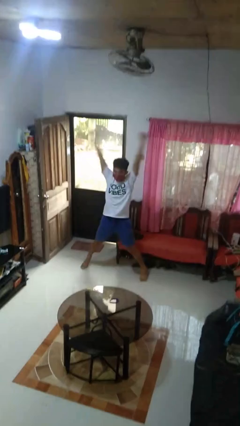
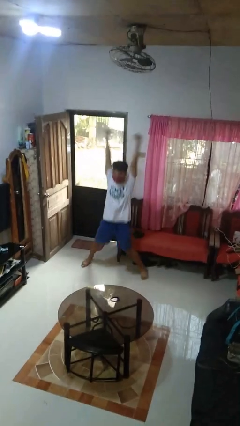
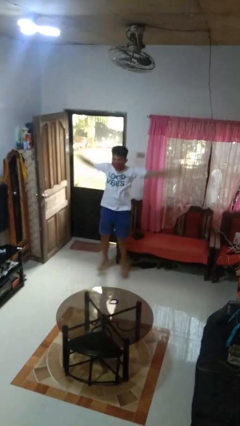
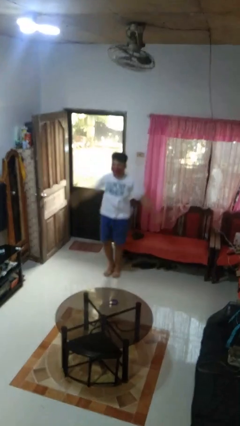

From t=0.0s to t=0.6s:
person exercises with jumping jacks

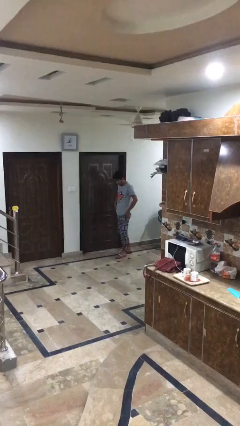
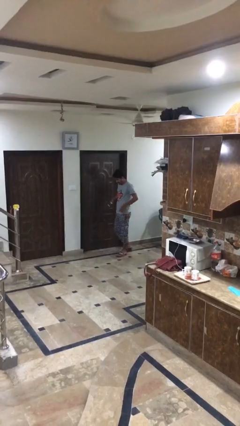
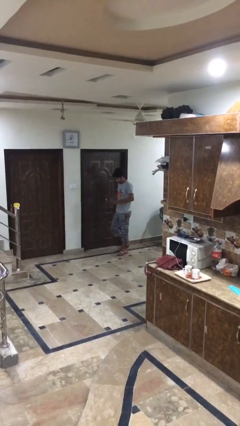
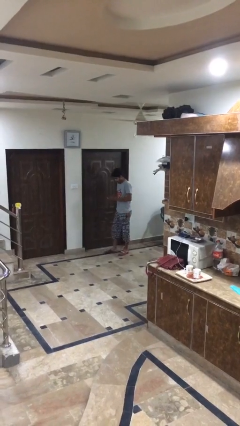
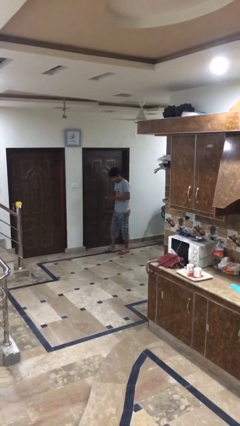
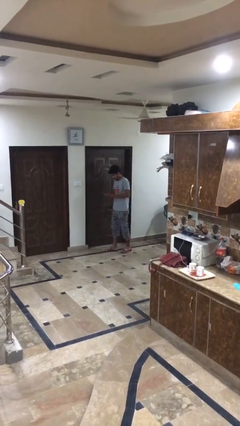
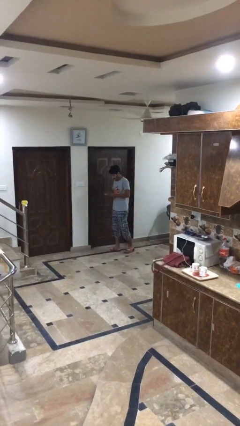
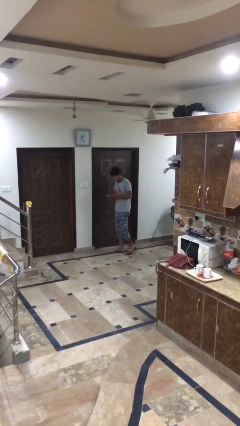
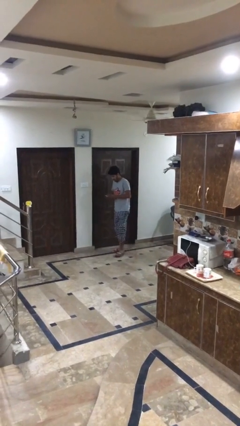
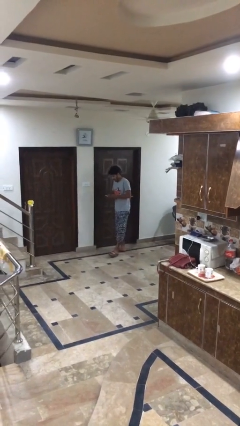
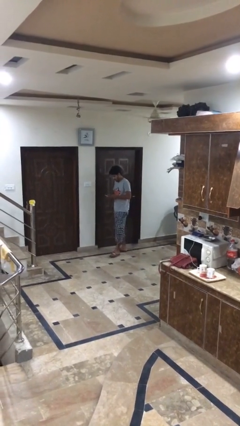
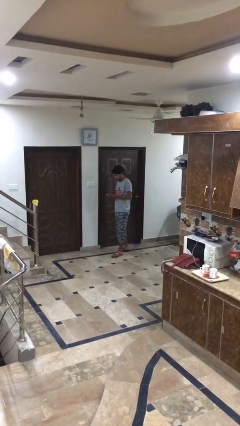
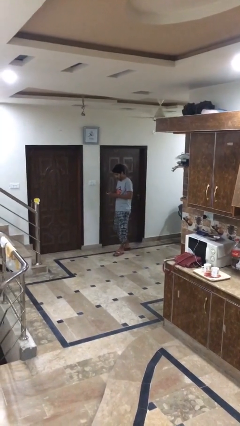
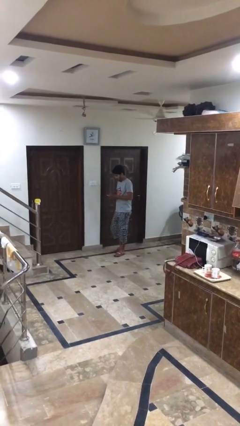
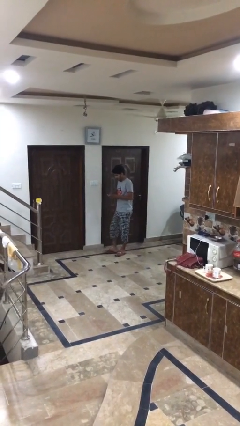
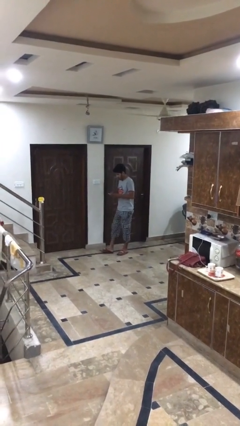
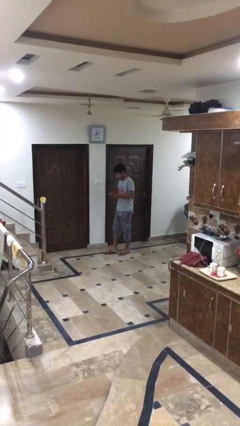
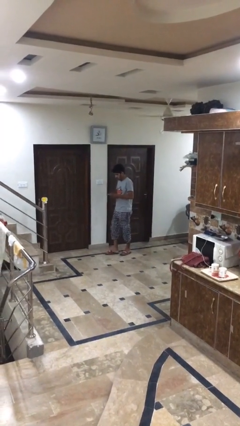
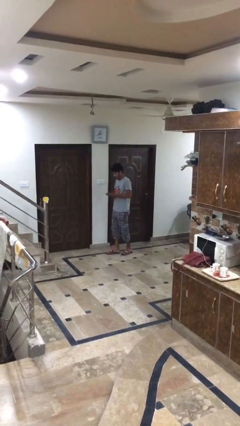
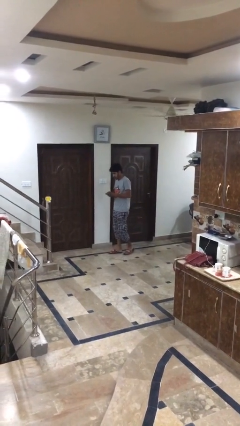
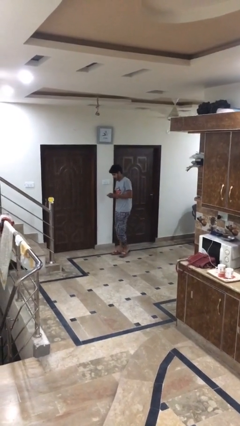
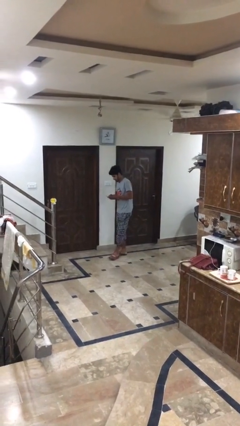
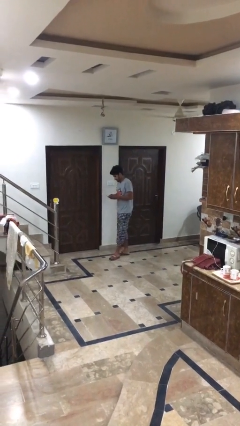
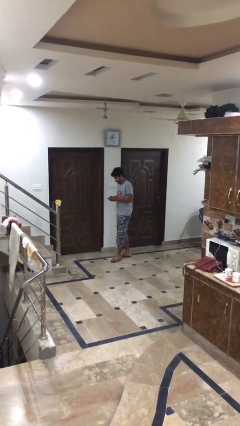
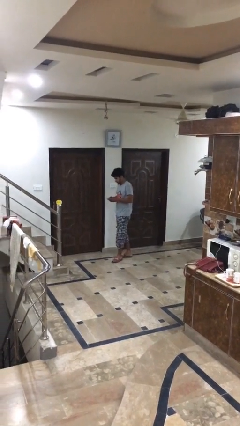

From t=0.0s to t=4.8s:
person texts on phone

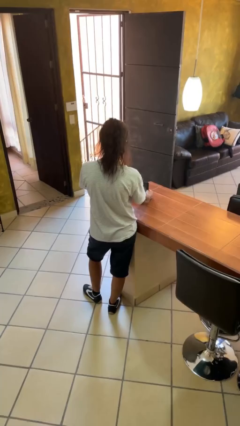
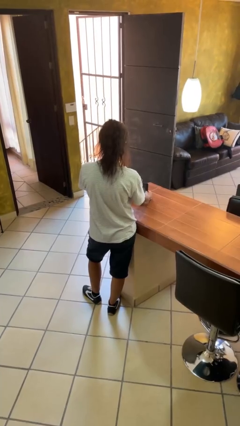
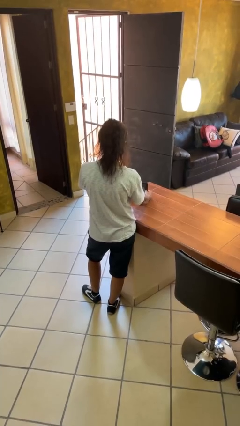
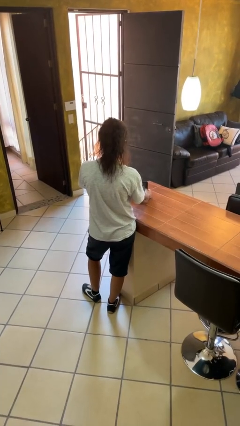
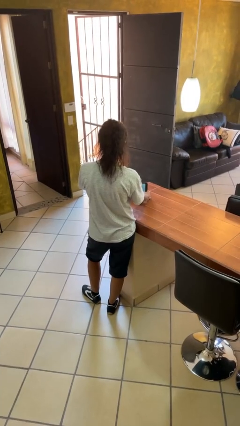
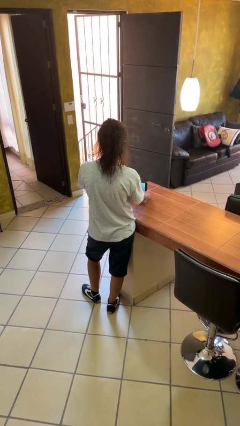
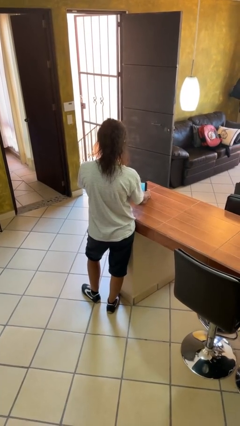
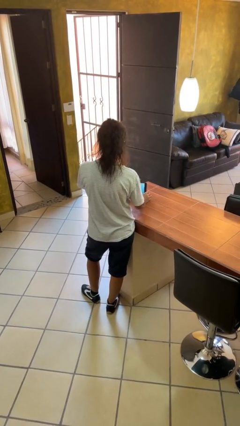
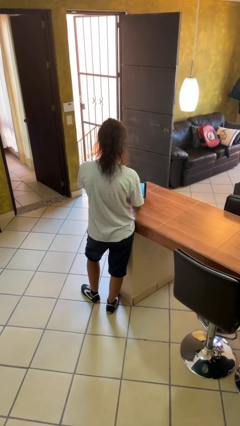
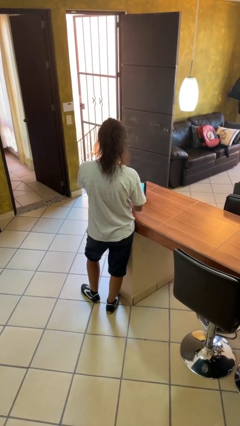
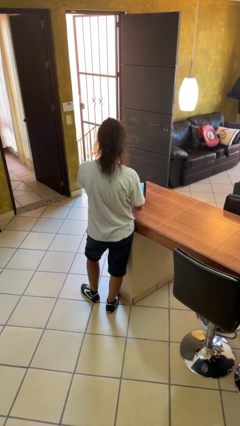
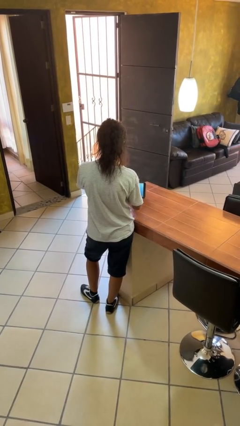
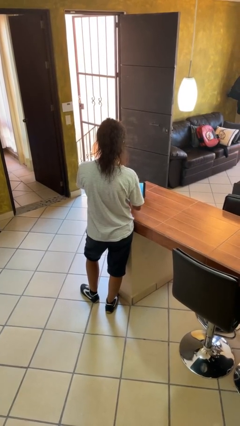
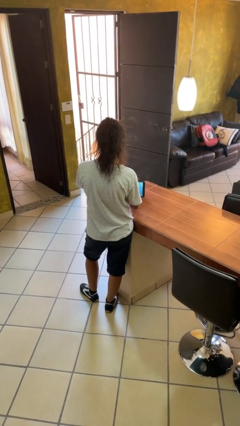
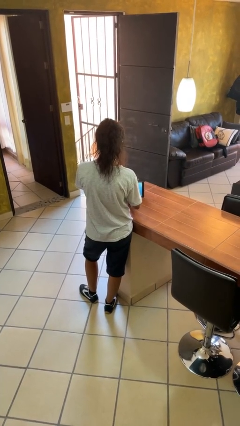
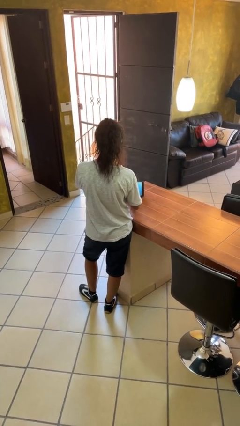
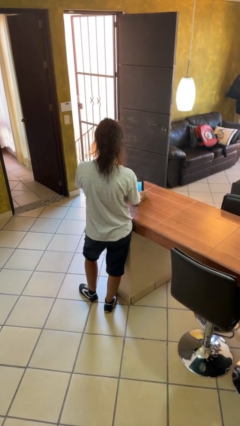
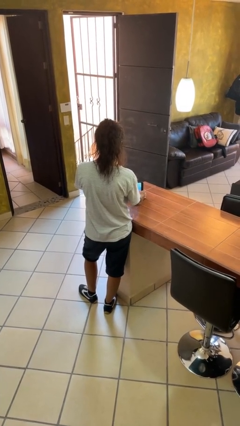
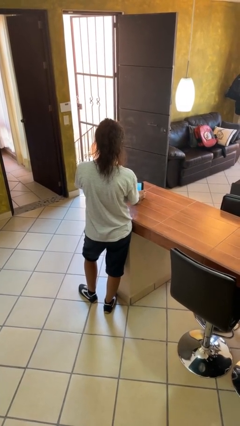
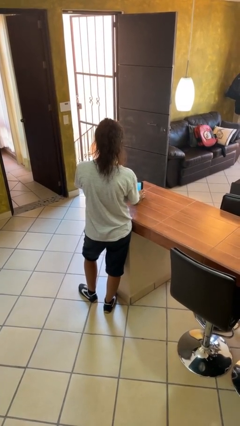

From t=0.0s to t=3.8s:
person interacts with tablet

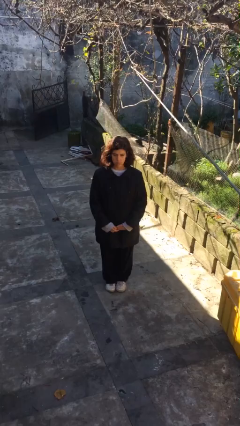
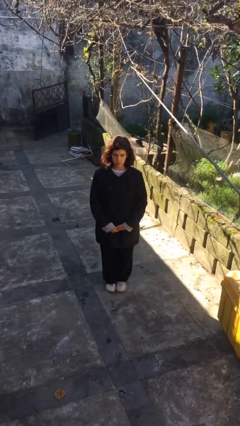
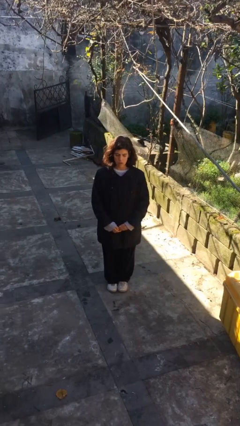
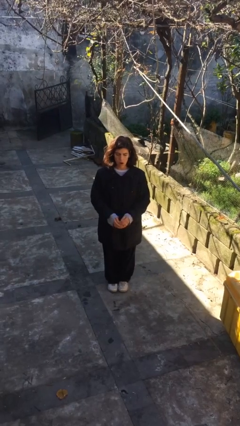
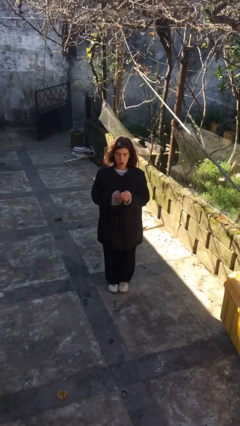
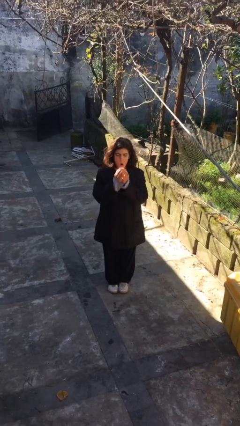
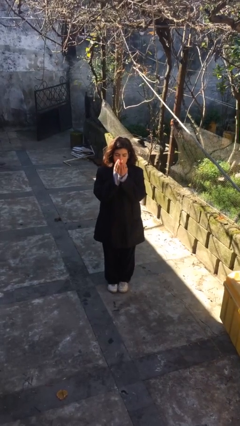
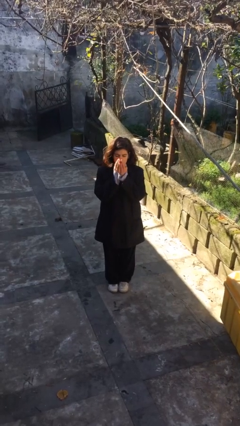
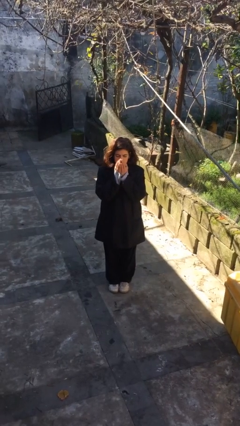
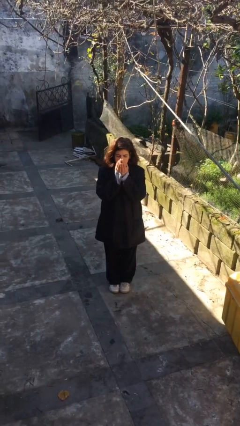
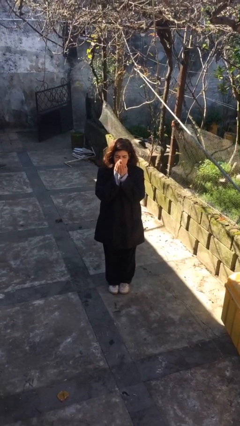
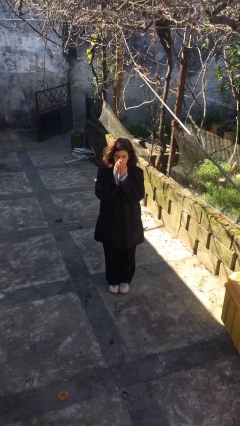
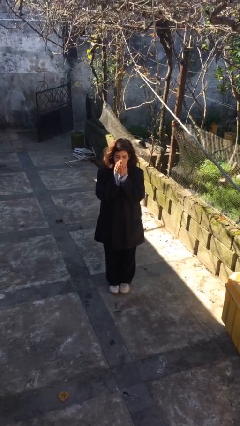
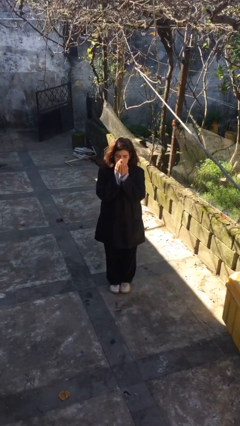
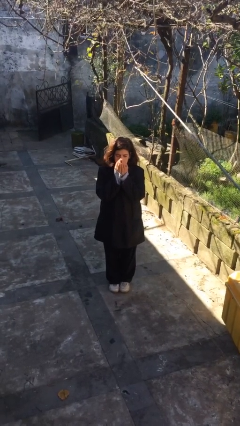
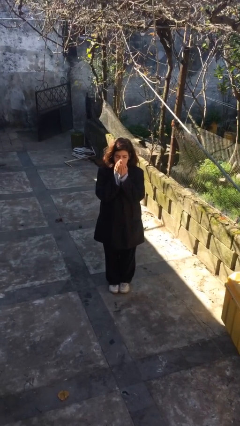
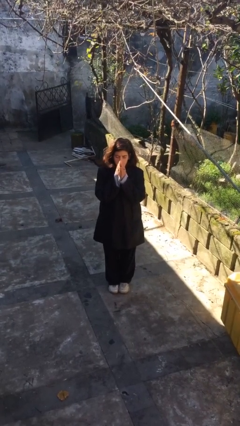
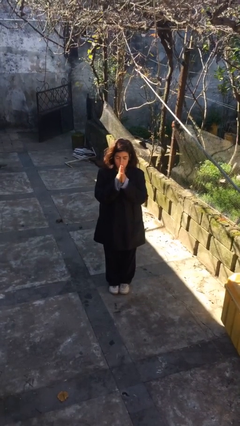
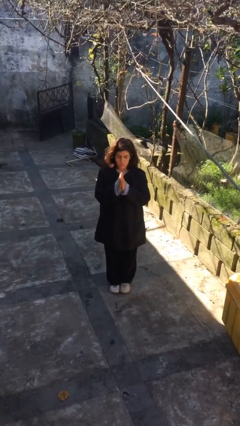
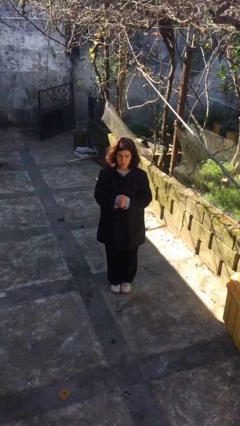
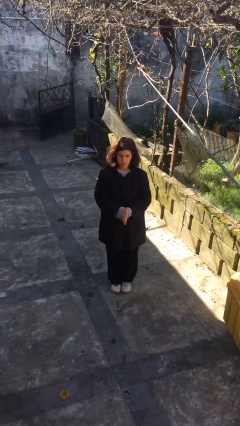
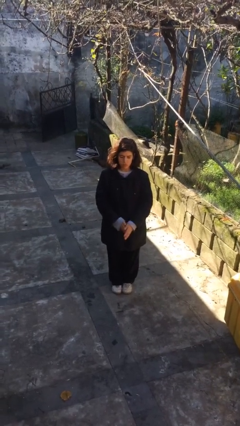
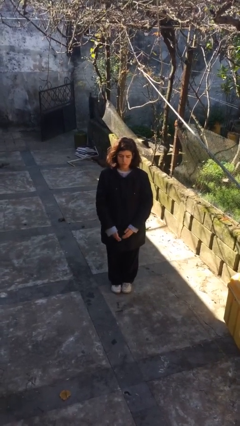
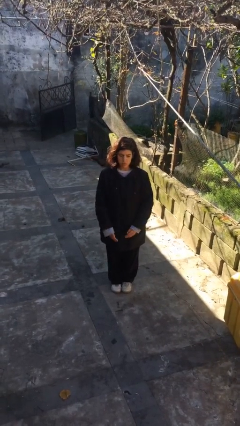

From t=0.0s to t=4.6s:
person blows into hands

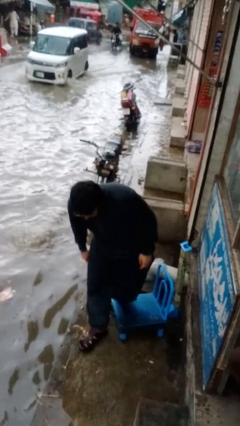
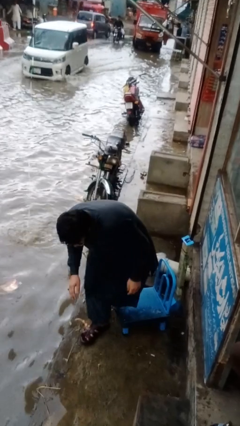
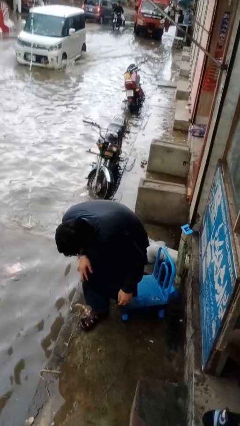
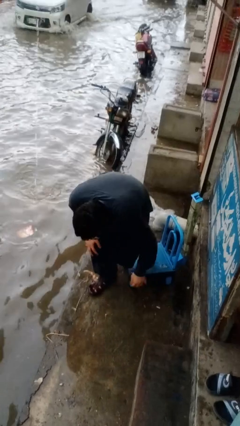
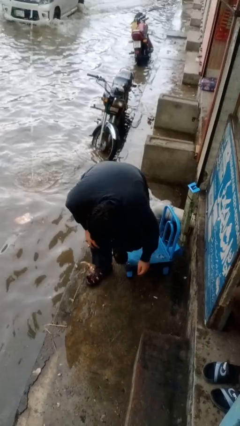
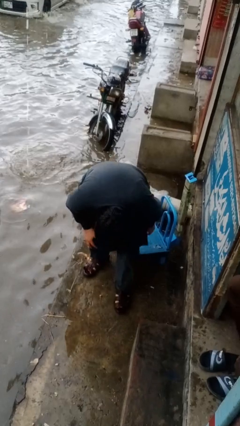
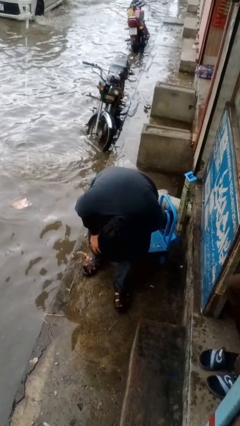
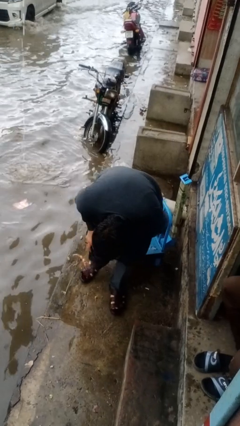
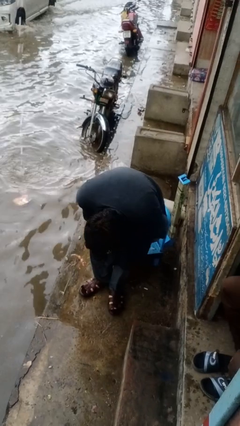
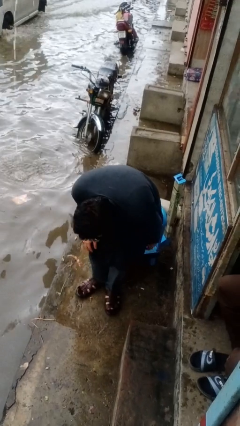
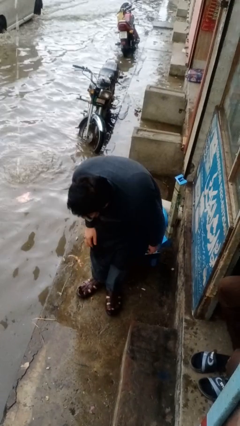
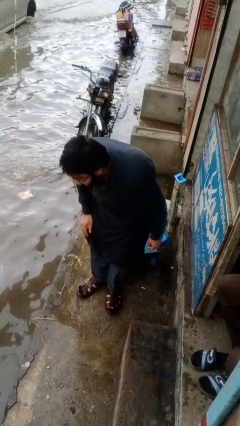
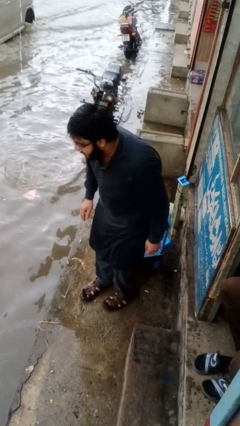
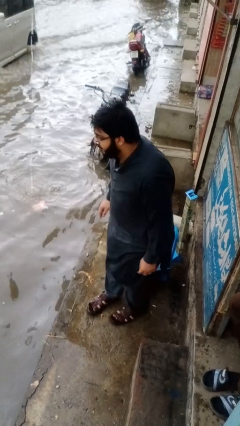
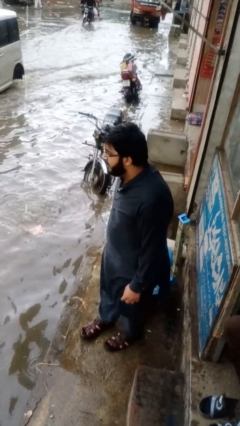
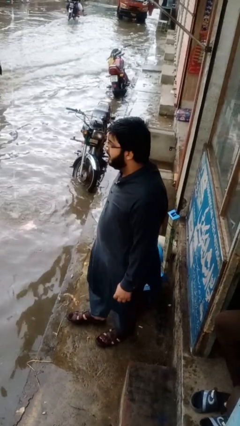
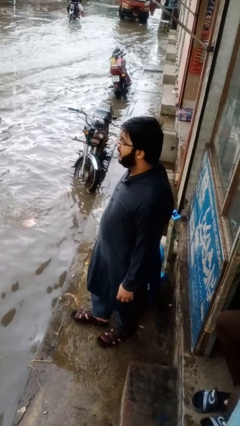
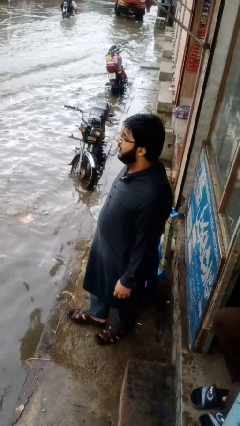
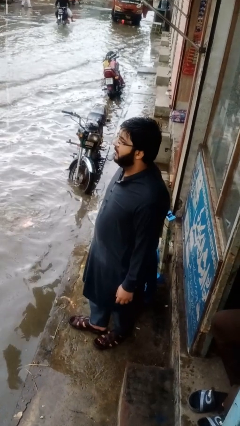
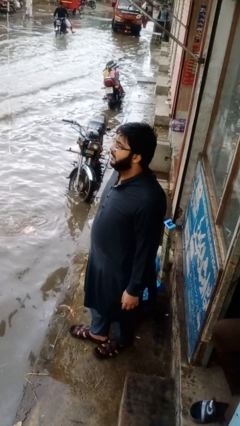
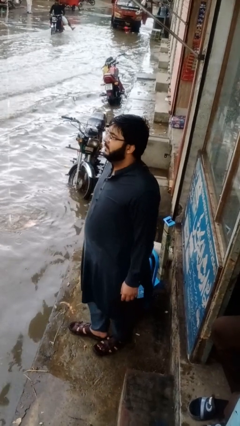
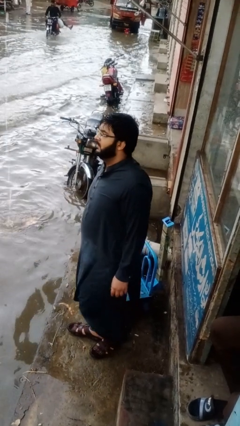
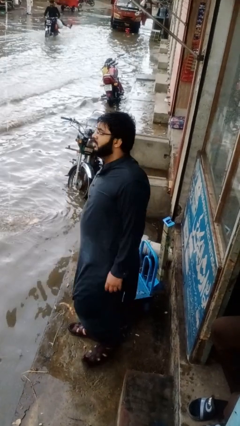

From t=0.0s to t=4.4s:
person stands up from floor
